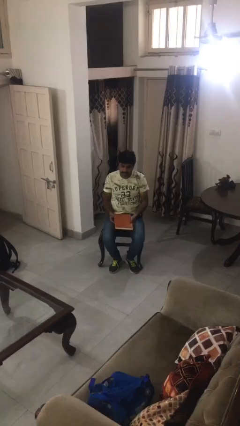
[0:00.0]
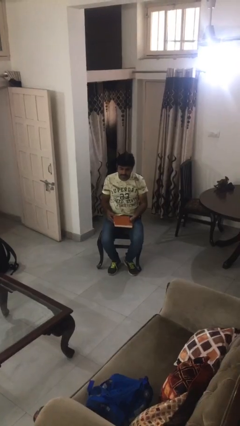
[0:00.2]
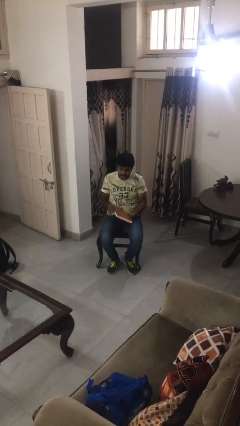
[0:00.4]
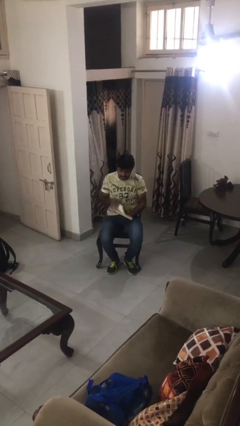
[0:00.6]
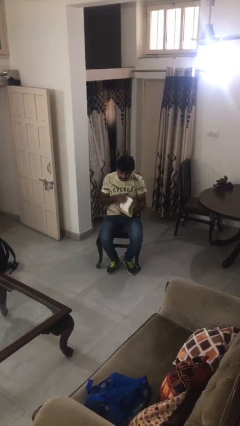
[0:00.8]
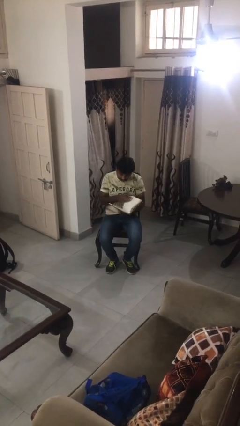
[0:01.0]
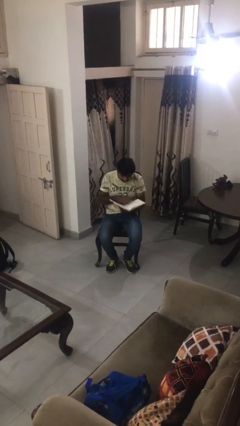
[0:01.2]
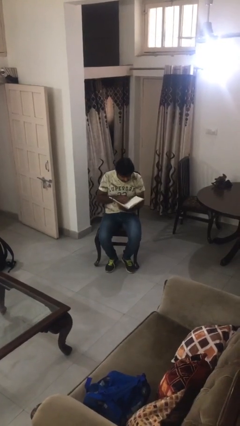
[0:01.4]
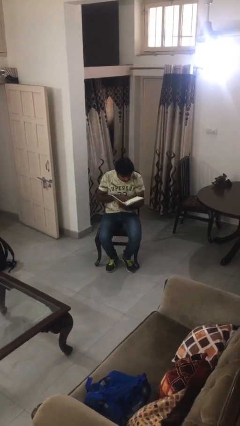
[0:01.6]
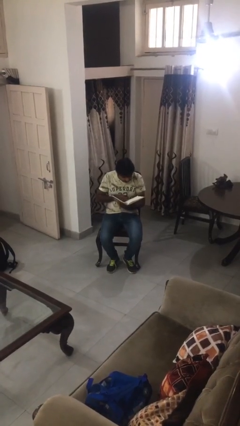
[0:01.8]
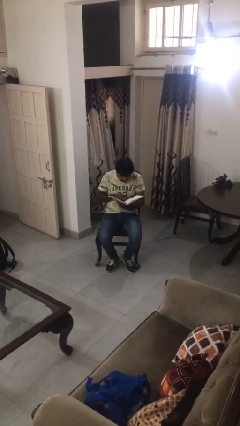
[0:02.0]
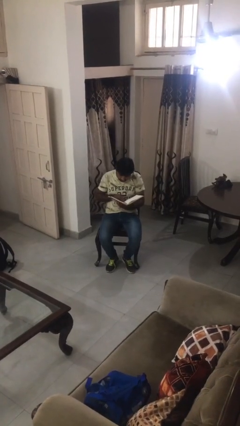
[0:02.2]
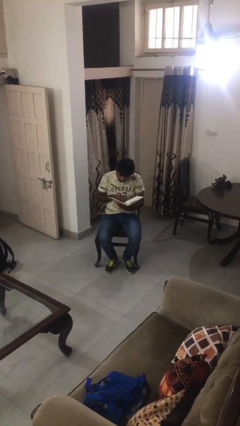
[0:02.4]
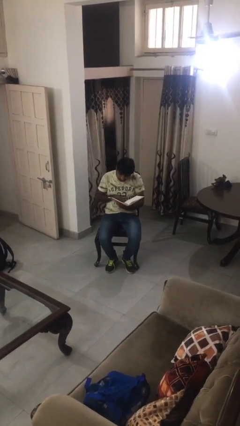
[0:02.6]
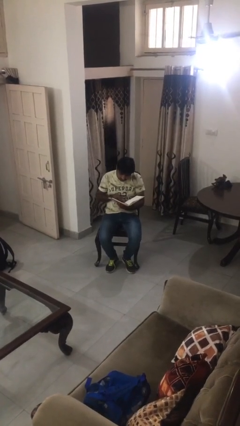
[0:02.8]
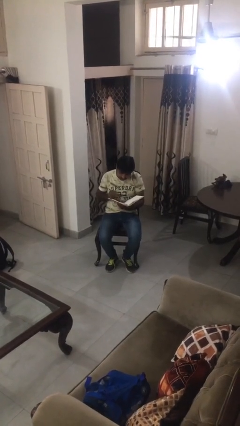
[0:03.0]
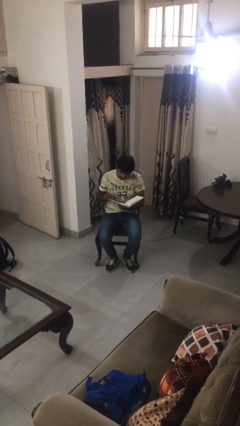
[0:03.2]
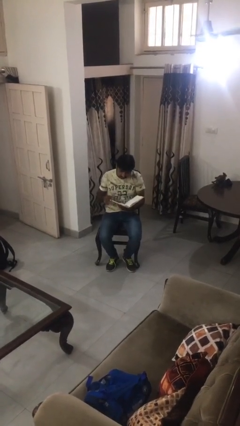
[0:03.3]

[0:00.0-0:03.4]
person reads book

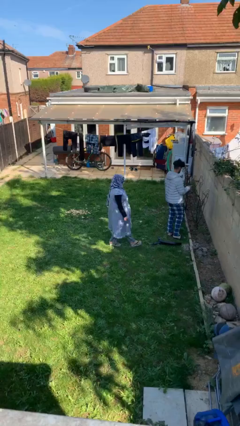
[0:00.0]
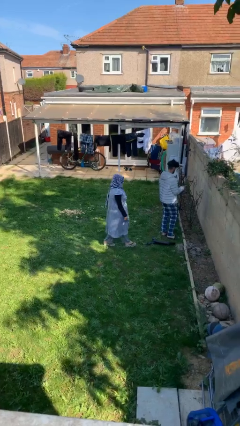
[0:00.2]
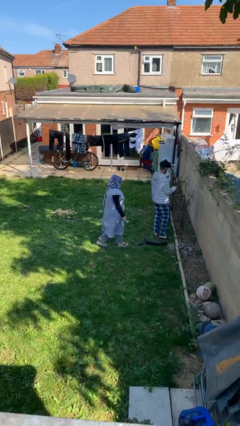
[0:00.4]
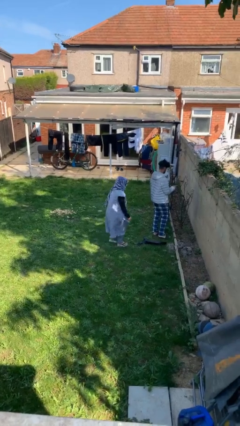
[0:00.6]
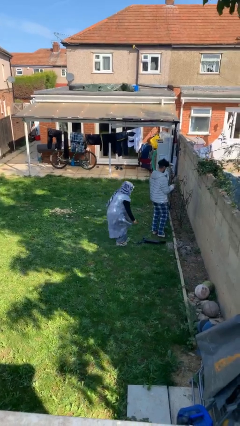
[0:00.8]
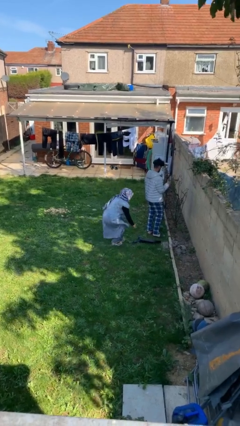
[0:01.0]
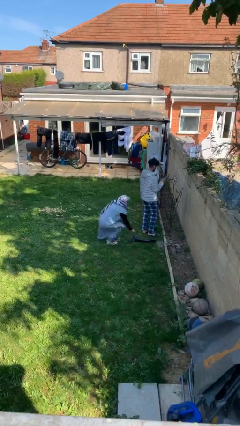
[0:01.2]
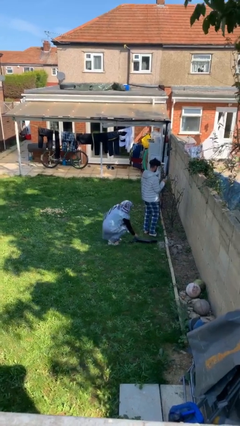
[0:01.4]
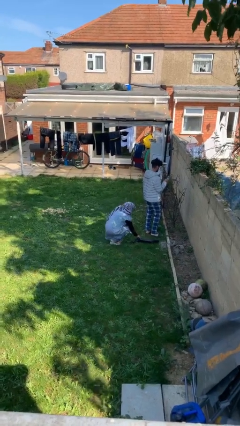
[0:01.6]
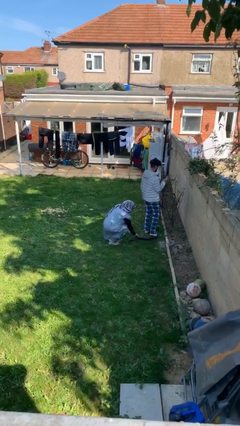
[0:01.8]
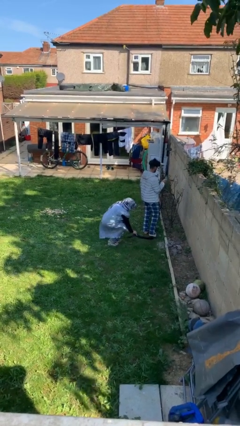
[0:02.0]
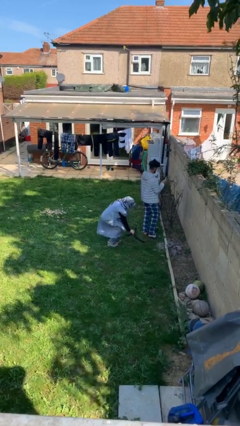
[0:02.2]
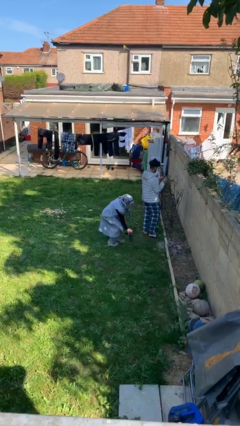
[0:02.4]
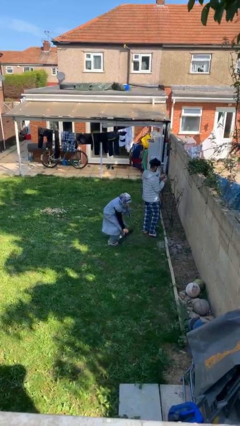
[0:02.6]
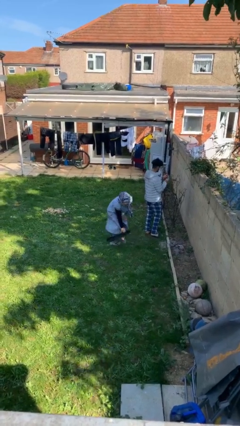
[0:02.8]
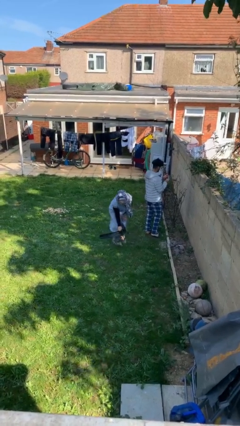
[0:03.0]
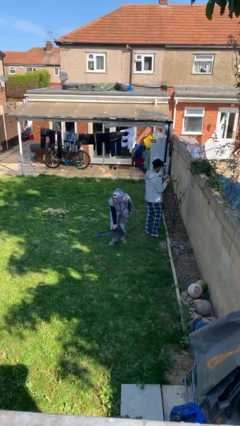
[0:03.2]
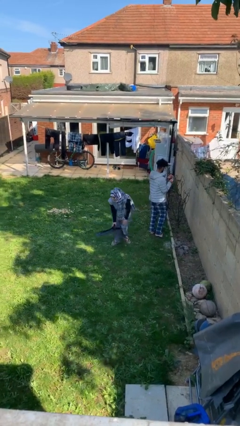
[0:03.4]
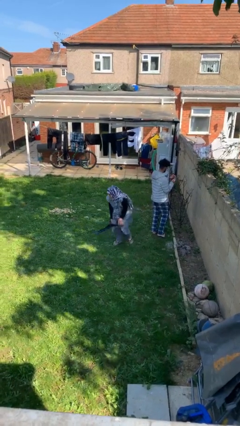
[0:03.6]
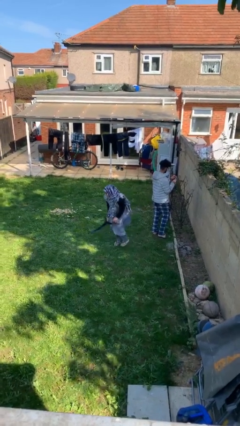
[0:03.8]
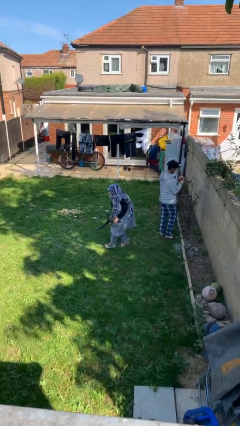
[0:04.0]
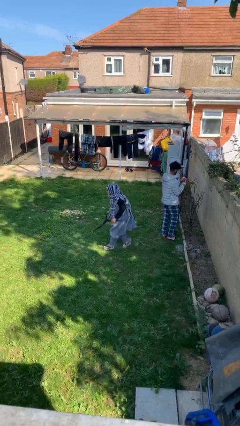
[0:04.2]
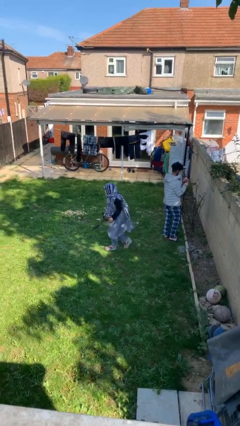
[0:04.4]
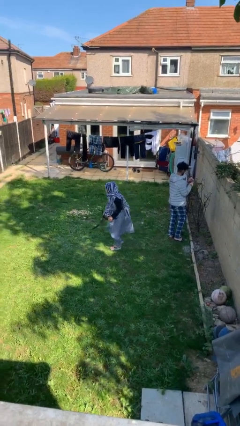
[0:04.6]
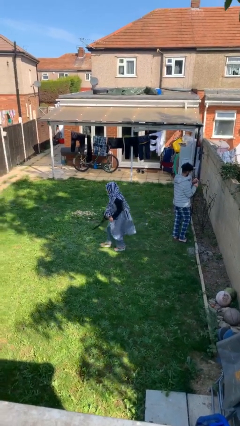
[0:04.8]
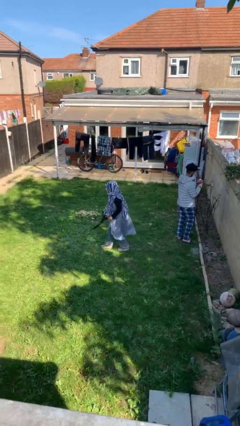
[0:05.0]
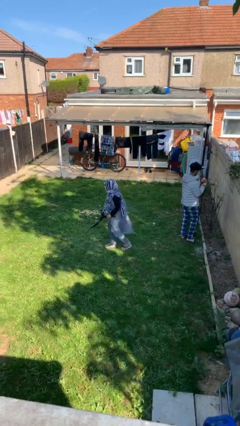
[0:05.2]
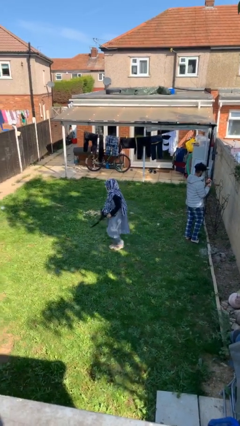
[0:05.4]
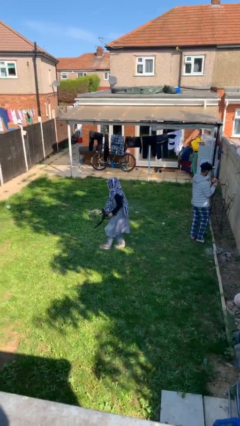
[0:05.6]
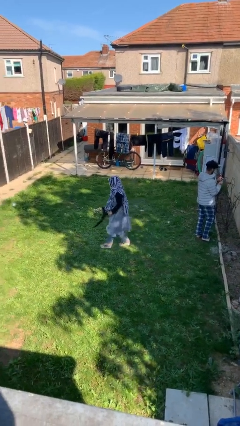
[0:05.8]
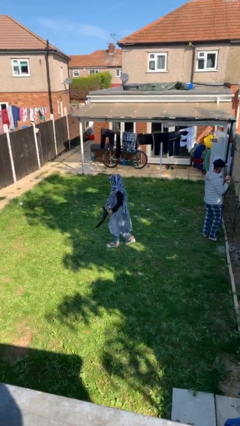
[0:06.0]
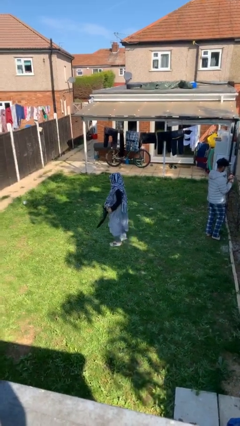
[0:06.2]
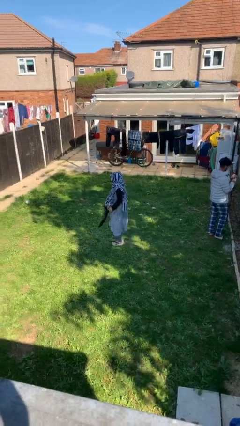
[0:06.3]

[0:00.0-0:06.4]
person steals object from person

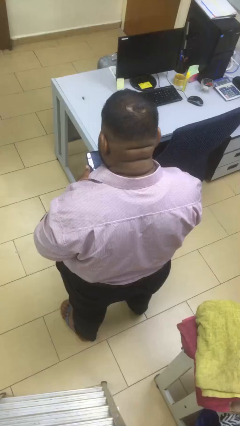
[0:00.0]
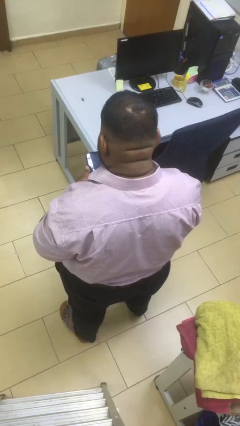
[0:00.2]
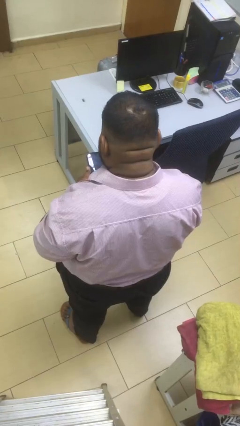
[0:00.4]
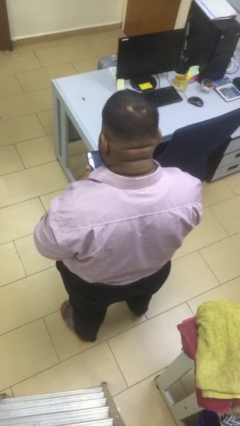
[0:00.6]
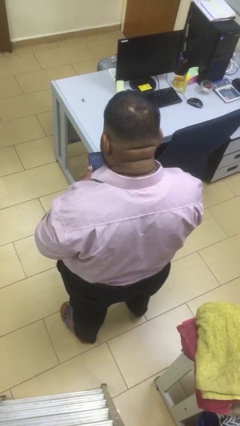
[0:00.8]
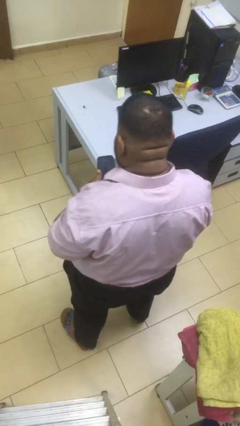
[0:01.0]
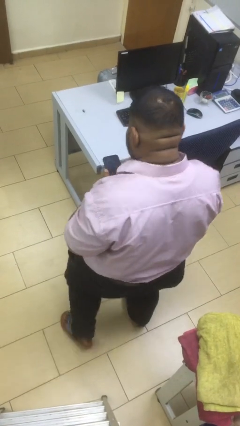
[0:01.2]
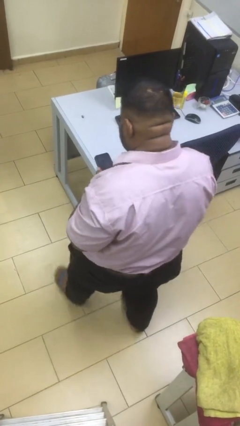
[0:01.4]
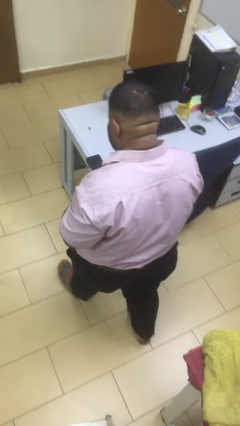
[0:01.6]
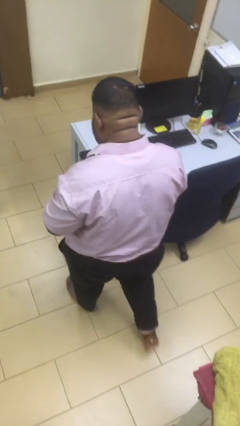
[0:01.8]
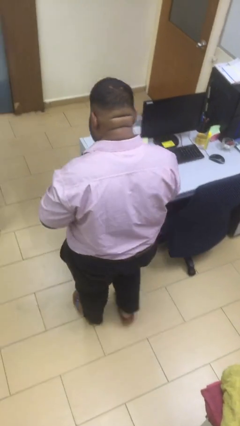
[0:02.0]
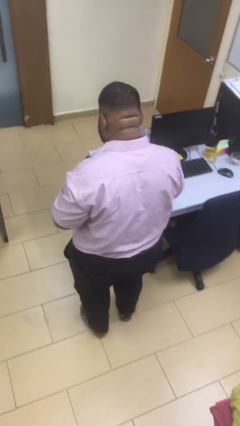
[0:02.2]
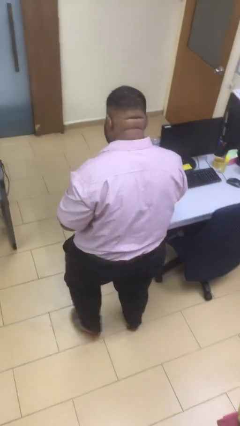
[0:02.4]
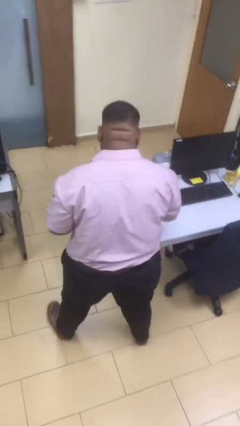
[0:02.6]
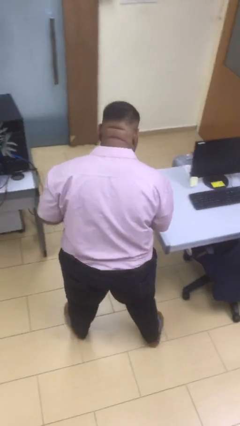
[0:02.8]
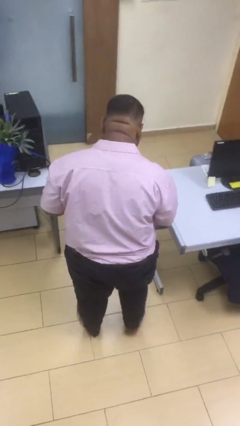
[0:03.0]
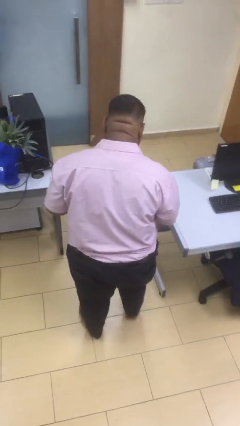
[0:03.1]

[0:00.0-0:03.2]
person bumps into table

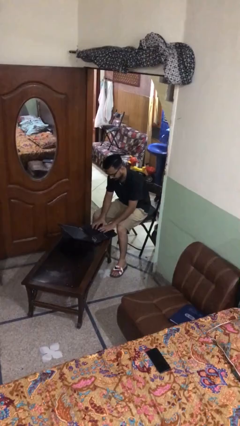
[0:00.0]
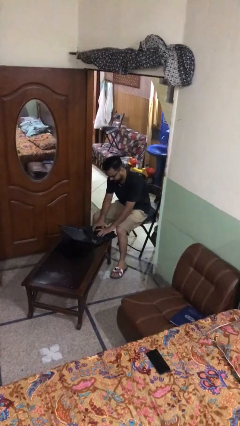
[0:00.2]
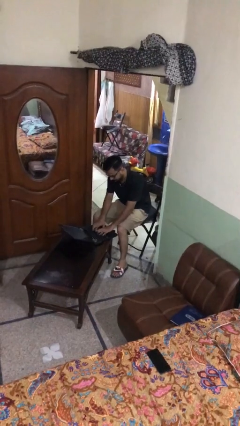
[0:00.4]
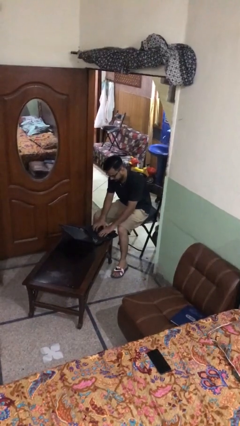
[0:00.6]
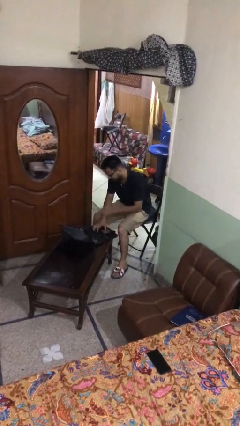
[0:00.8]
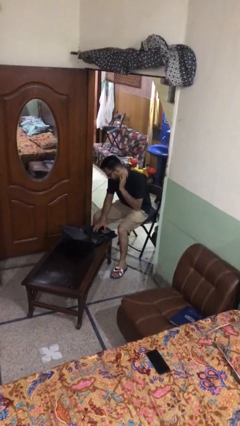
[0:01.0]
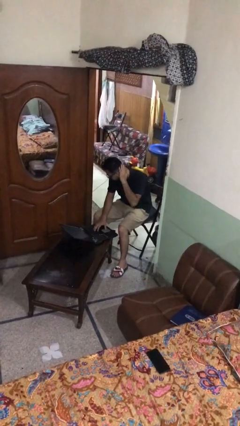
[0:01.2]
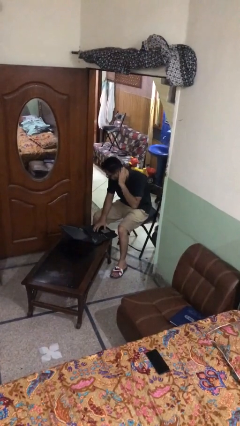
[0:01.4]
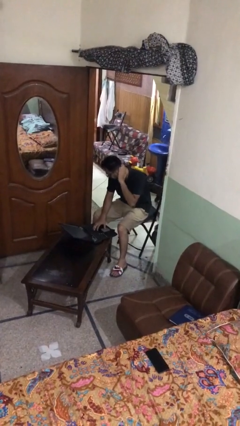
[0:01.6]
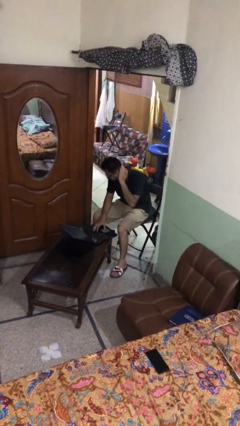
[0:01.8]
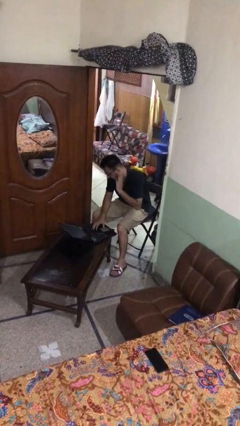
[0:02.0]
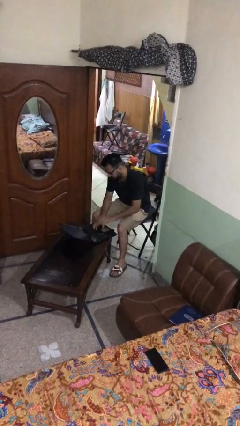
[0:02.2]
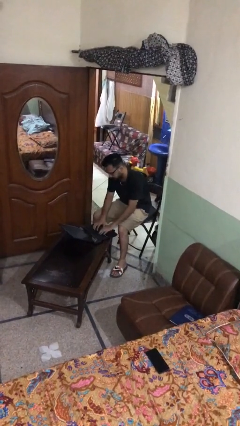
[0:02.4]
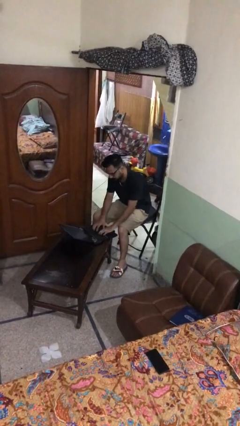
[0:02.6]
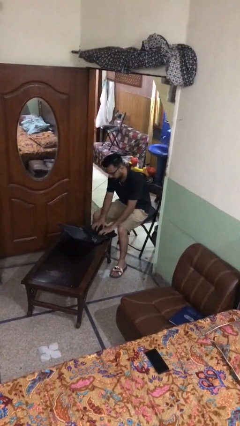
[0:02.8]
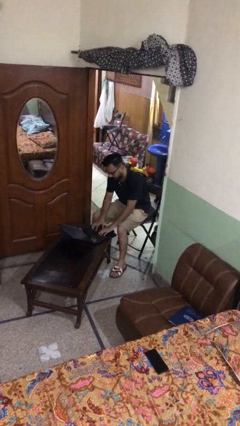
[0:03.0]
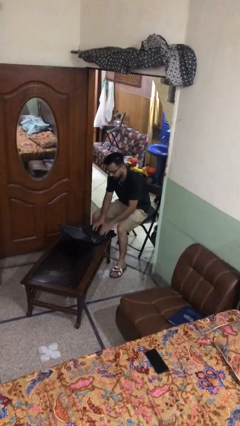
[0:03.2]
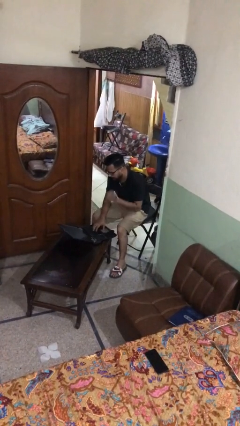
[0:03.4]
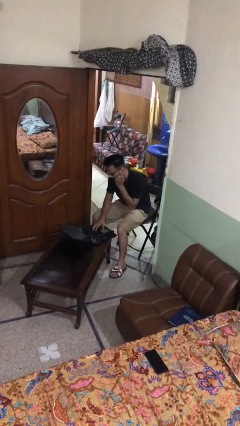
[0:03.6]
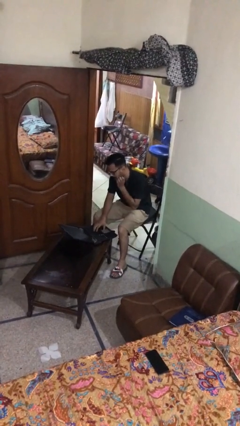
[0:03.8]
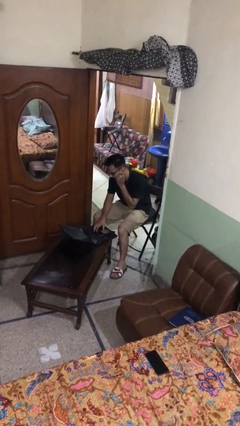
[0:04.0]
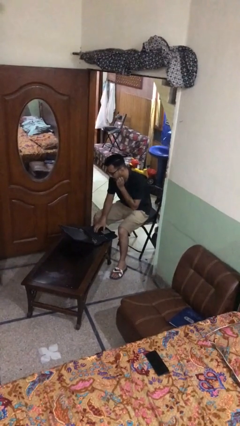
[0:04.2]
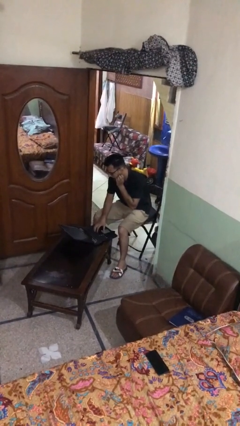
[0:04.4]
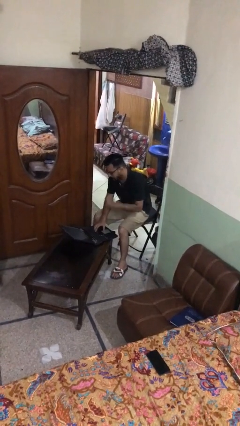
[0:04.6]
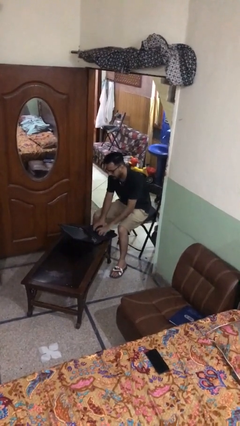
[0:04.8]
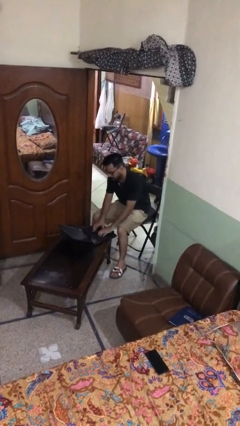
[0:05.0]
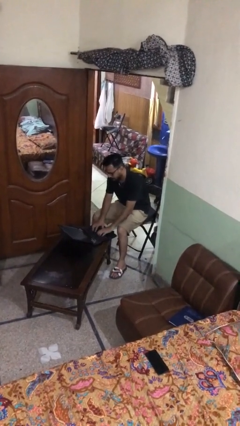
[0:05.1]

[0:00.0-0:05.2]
person interacts with laptop
